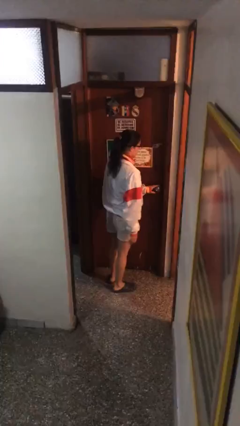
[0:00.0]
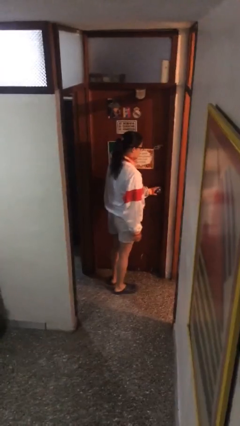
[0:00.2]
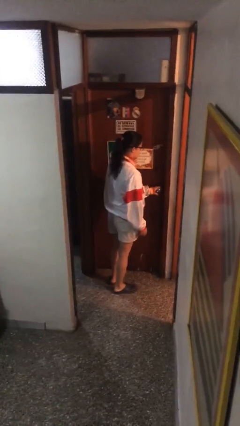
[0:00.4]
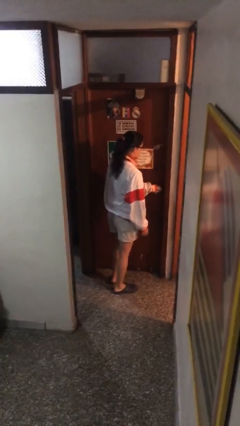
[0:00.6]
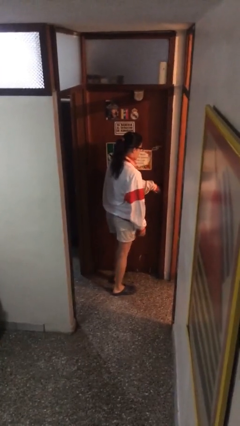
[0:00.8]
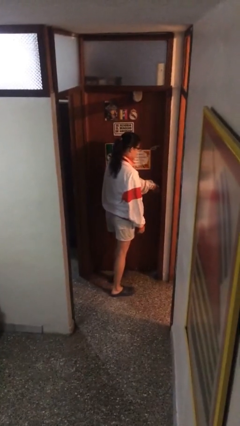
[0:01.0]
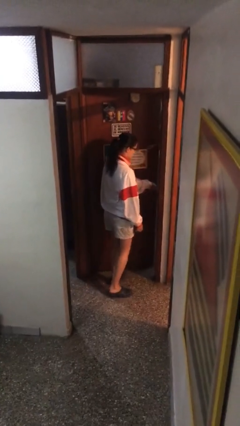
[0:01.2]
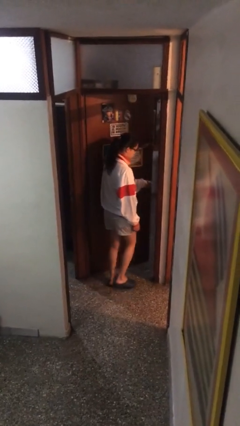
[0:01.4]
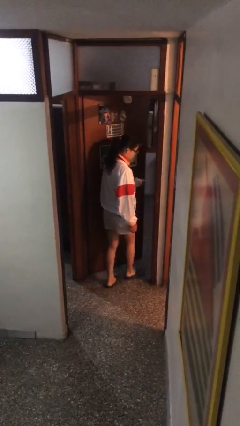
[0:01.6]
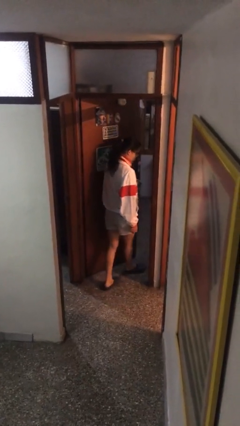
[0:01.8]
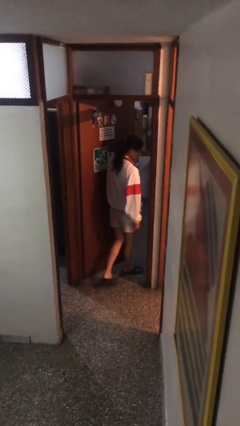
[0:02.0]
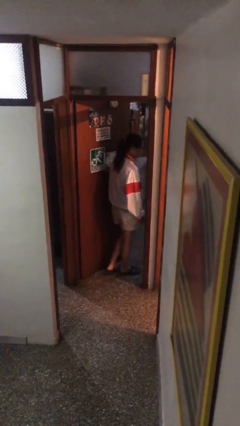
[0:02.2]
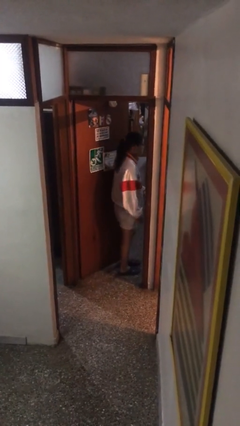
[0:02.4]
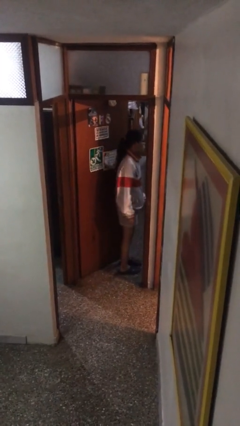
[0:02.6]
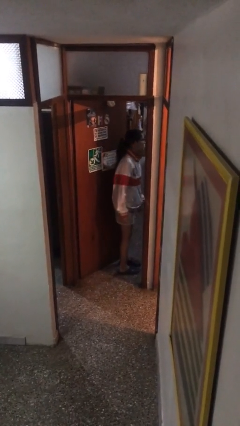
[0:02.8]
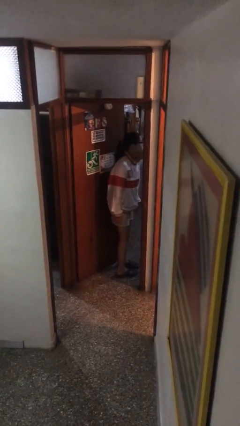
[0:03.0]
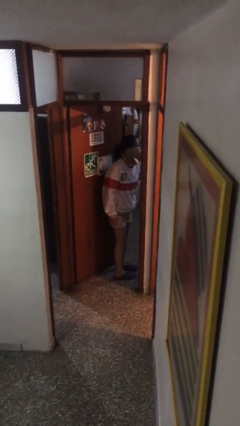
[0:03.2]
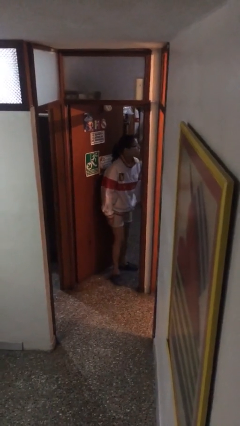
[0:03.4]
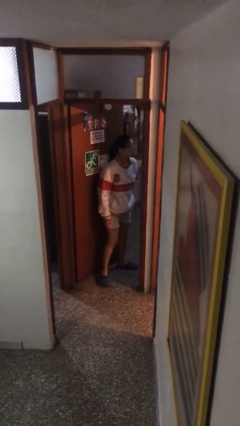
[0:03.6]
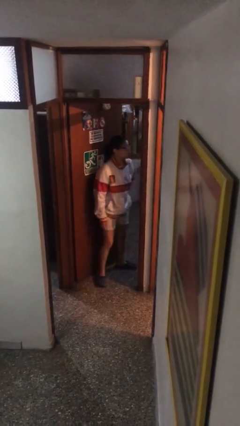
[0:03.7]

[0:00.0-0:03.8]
person opens facility door

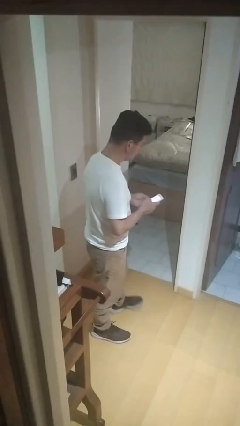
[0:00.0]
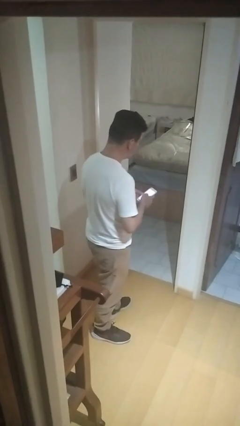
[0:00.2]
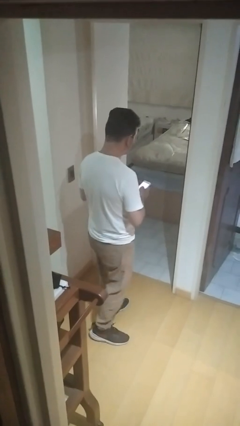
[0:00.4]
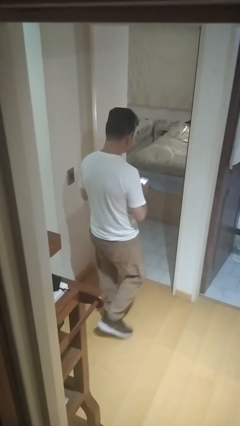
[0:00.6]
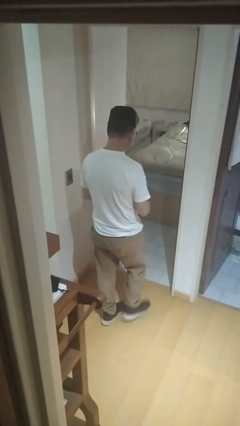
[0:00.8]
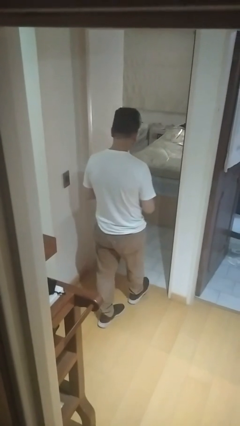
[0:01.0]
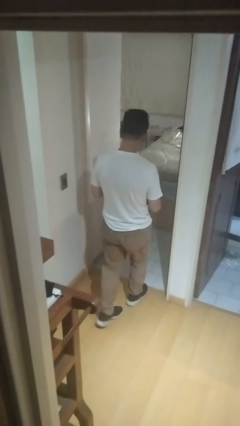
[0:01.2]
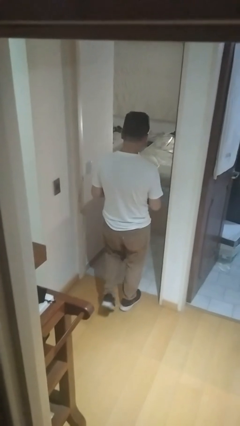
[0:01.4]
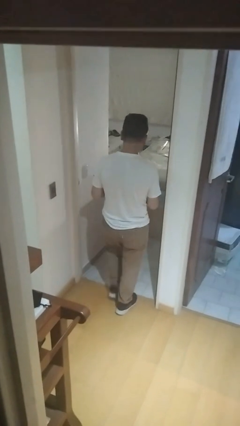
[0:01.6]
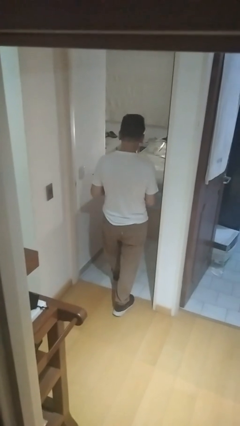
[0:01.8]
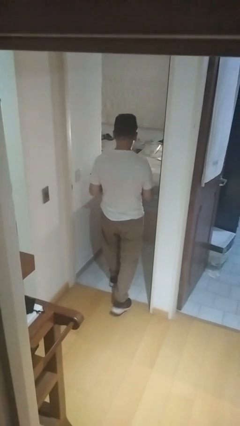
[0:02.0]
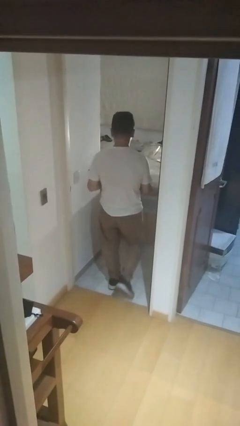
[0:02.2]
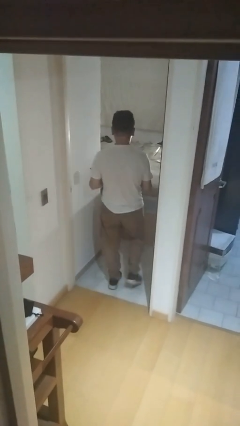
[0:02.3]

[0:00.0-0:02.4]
person exits scene through structure

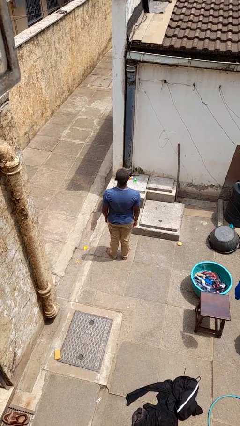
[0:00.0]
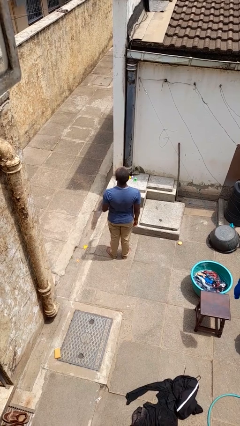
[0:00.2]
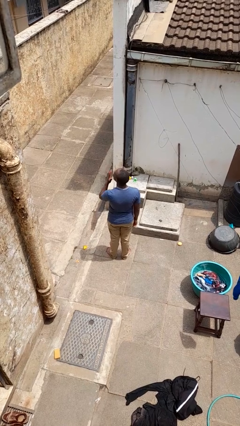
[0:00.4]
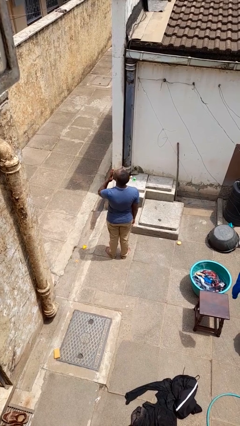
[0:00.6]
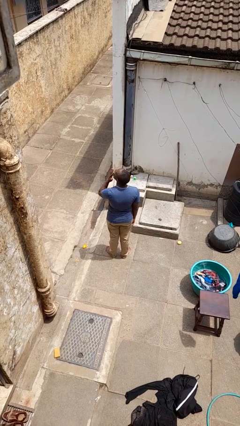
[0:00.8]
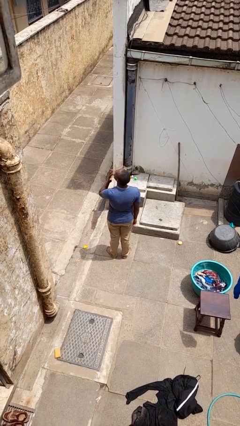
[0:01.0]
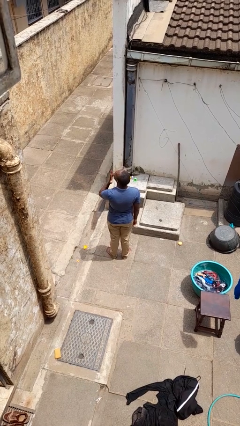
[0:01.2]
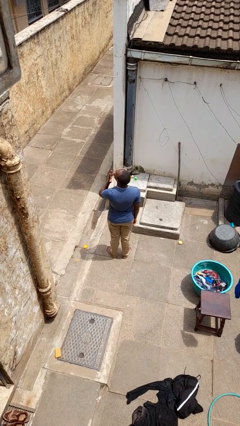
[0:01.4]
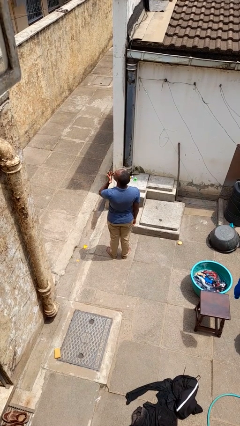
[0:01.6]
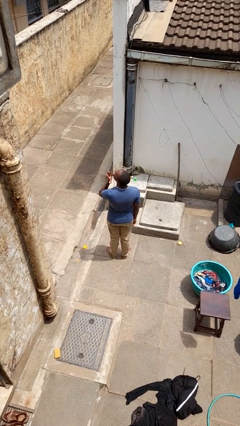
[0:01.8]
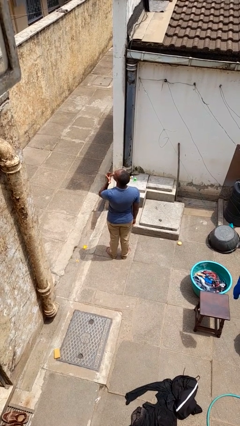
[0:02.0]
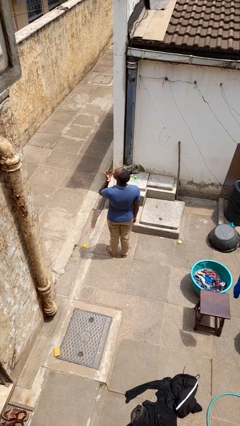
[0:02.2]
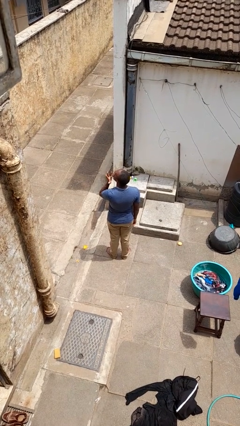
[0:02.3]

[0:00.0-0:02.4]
person licks fingers

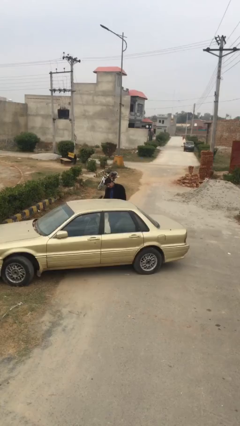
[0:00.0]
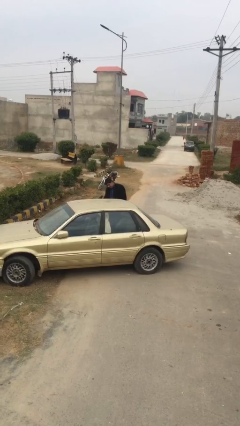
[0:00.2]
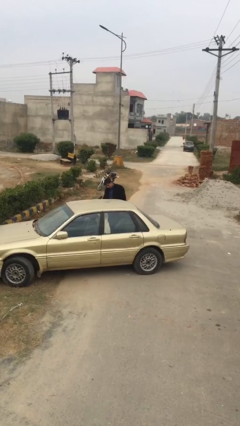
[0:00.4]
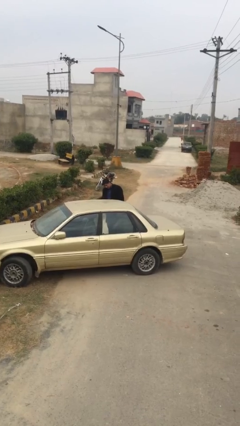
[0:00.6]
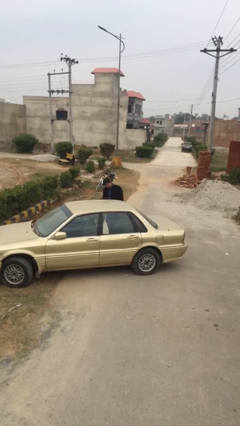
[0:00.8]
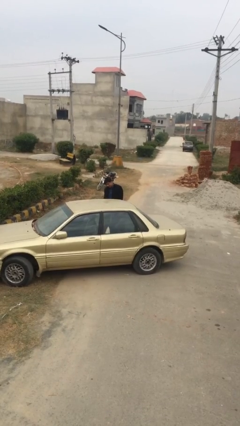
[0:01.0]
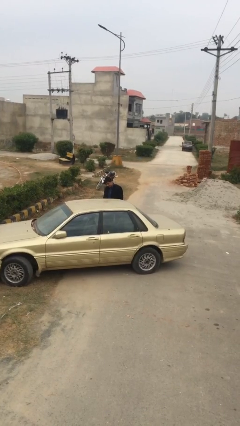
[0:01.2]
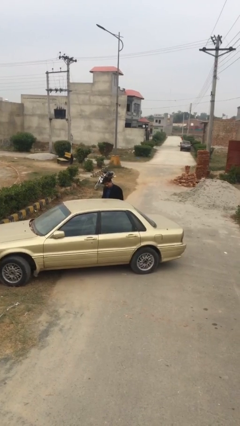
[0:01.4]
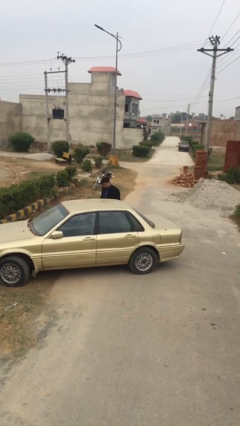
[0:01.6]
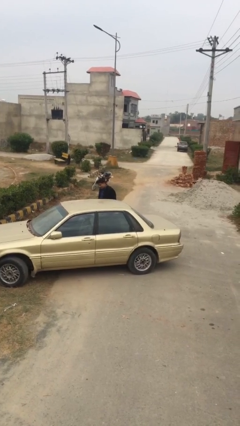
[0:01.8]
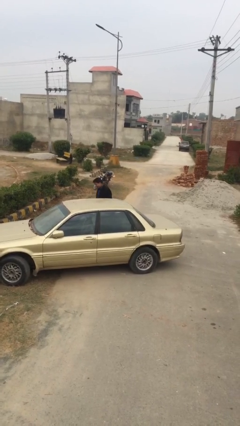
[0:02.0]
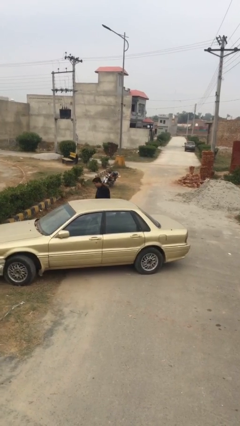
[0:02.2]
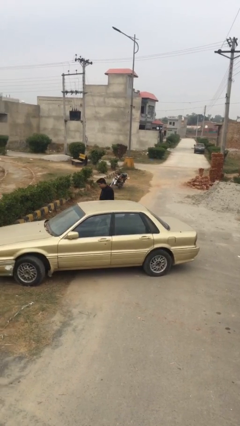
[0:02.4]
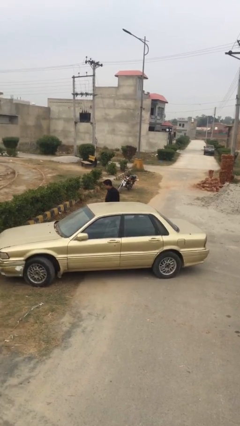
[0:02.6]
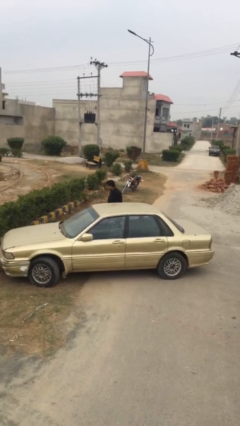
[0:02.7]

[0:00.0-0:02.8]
person closes car door

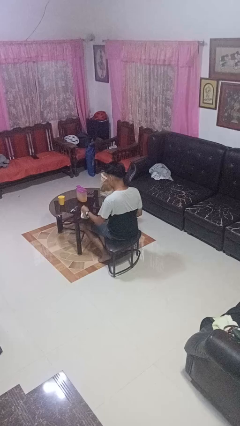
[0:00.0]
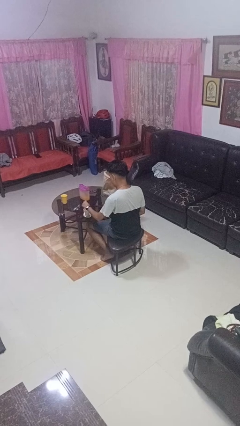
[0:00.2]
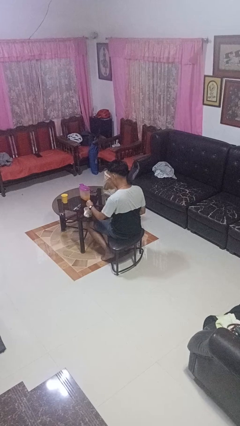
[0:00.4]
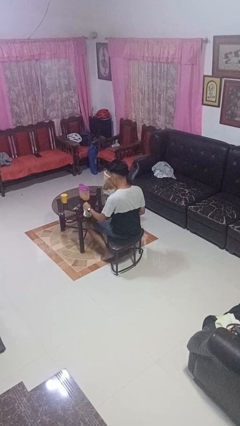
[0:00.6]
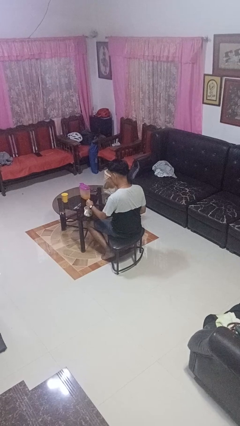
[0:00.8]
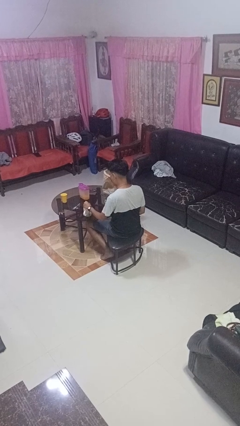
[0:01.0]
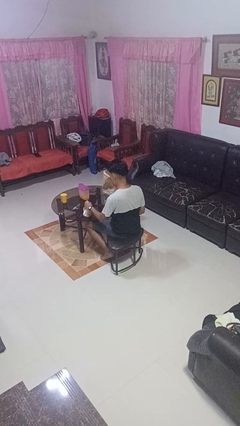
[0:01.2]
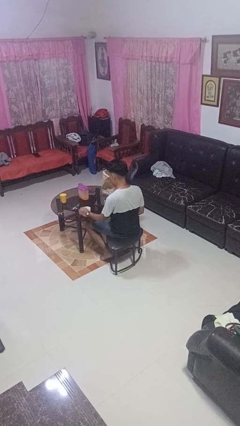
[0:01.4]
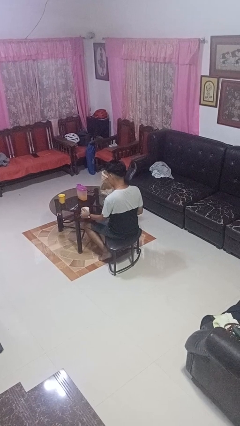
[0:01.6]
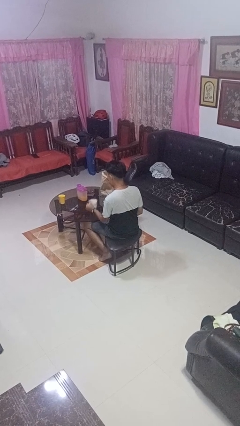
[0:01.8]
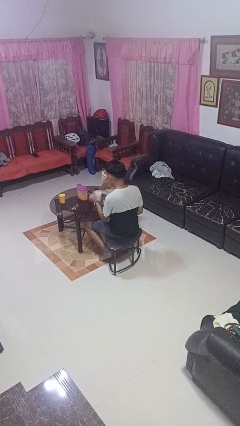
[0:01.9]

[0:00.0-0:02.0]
person stirs mug

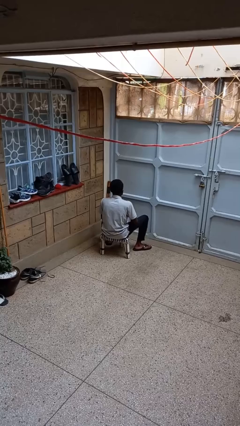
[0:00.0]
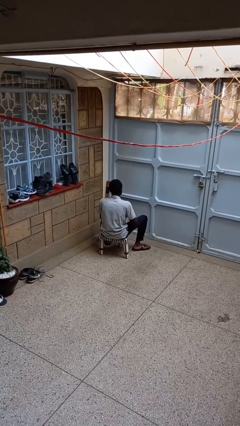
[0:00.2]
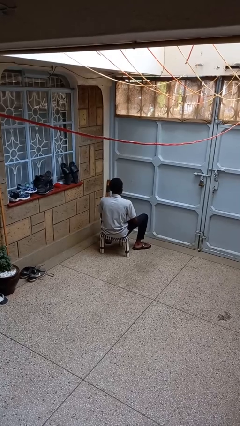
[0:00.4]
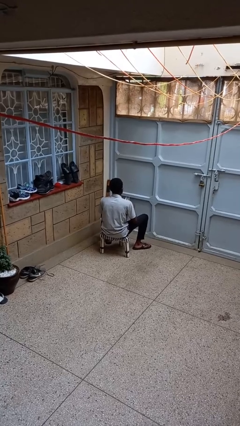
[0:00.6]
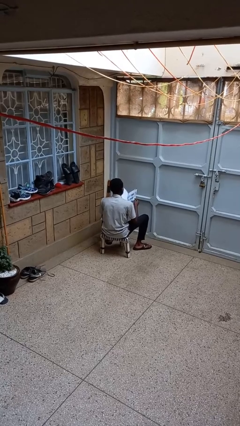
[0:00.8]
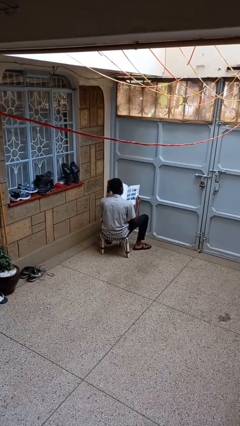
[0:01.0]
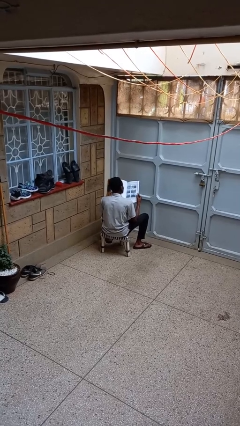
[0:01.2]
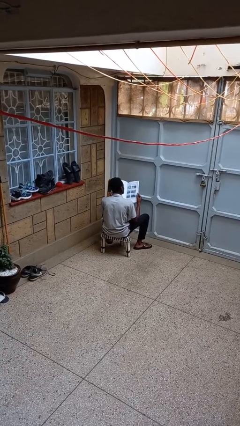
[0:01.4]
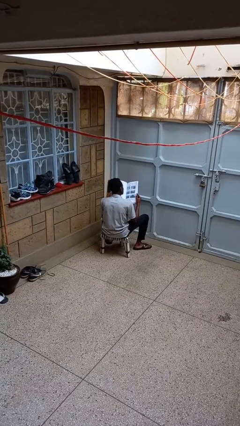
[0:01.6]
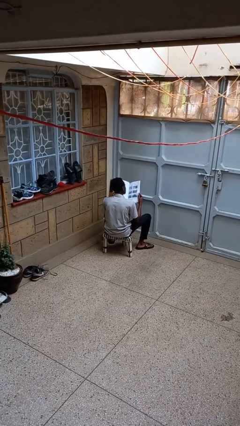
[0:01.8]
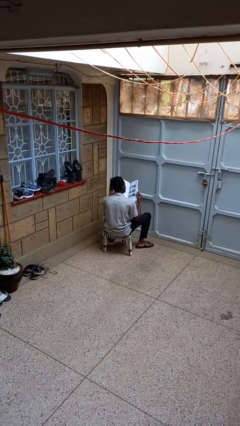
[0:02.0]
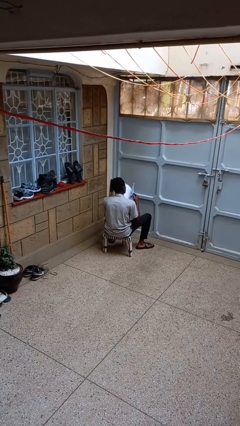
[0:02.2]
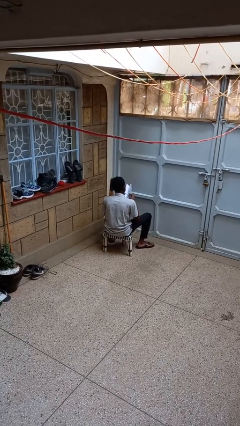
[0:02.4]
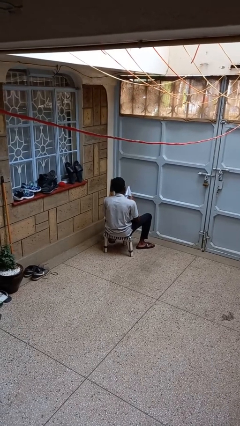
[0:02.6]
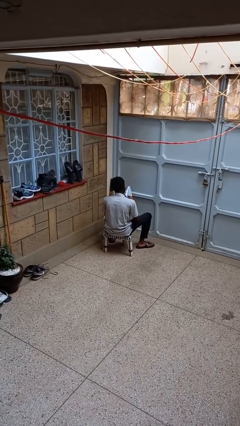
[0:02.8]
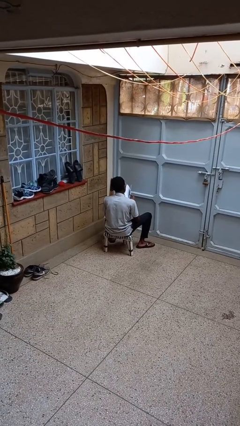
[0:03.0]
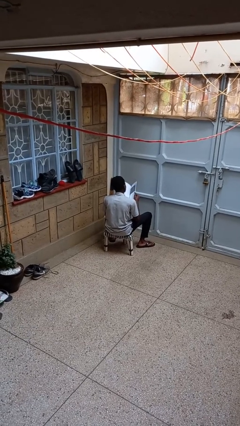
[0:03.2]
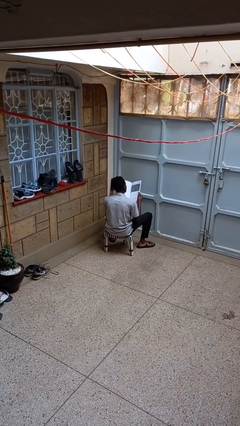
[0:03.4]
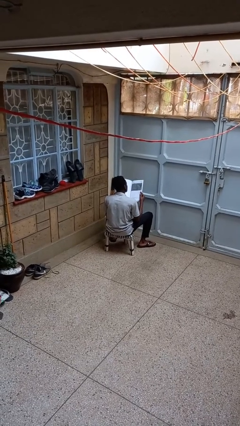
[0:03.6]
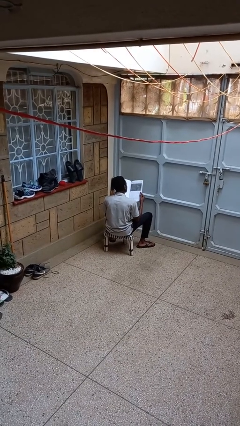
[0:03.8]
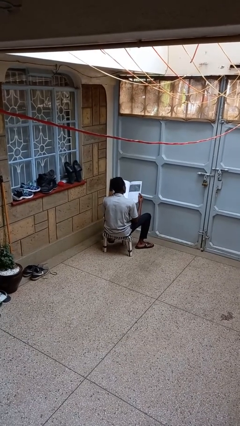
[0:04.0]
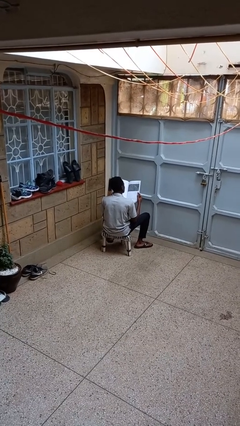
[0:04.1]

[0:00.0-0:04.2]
person reads magazine
